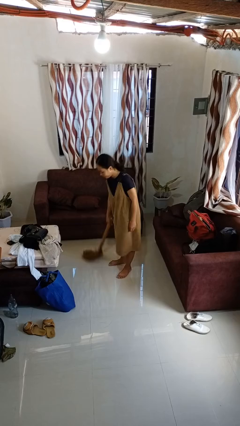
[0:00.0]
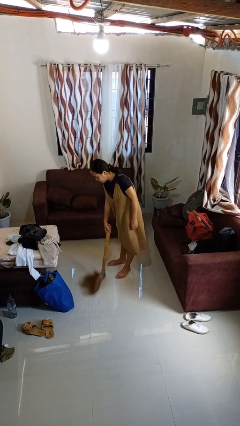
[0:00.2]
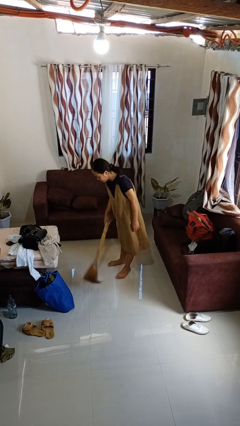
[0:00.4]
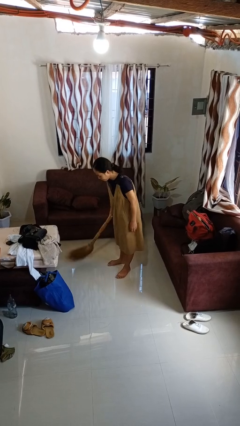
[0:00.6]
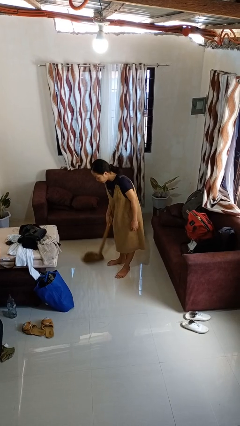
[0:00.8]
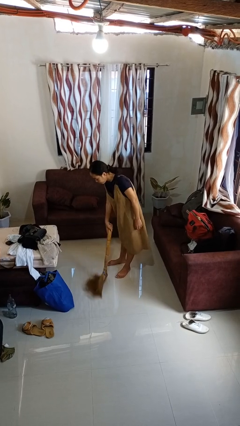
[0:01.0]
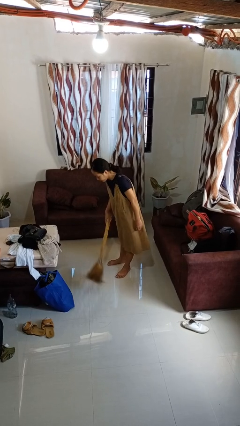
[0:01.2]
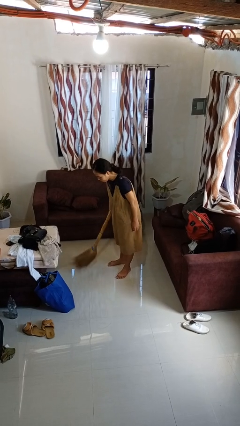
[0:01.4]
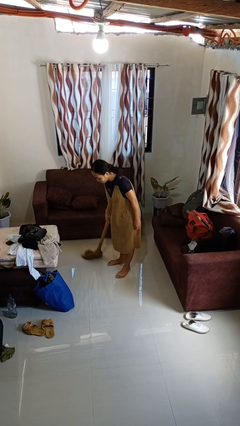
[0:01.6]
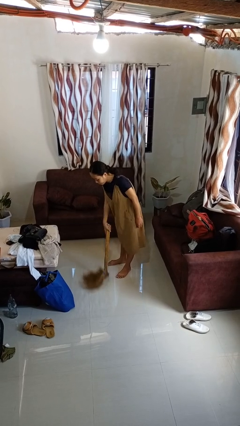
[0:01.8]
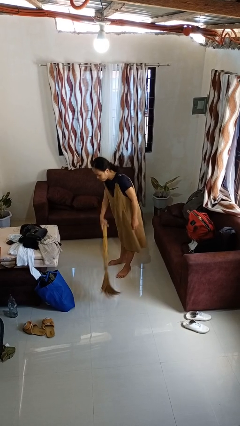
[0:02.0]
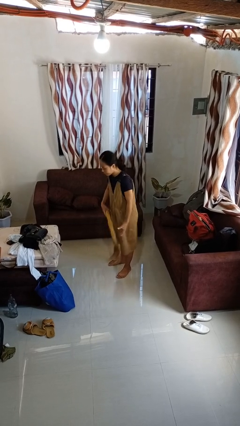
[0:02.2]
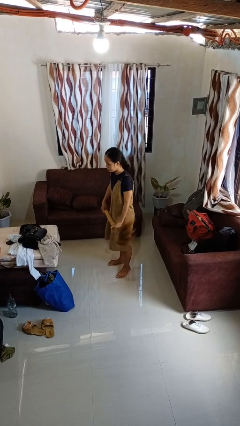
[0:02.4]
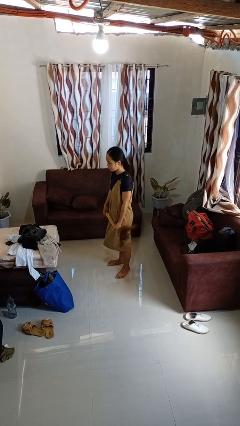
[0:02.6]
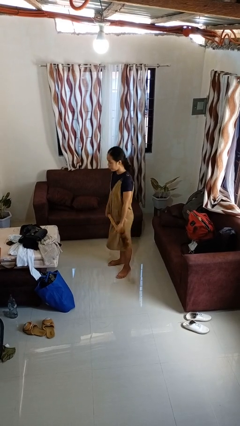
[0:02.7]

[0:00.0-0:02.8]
person sweeps floor

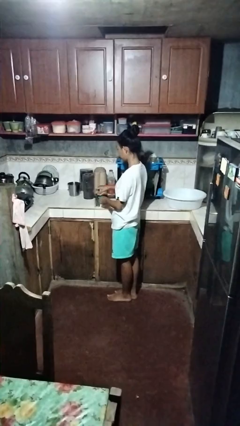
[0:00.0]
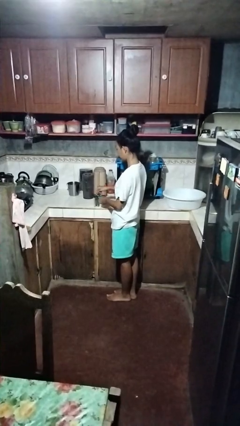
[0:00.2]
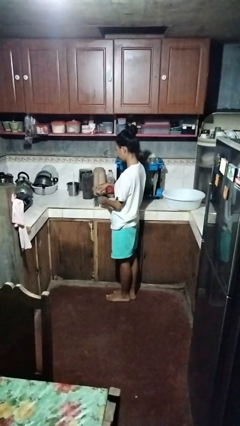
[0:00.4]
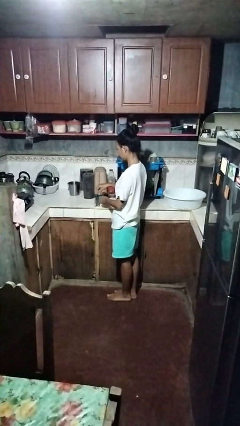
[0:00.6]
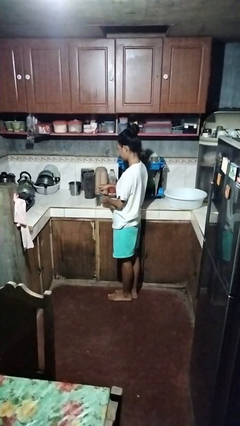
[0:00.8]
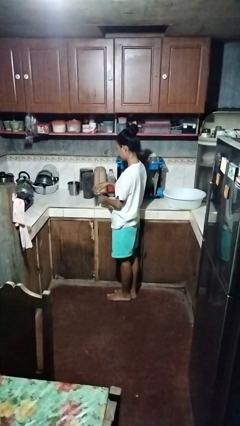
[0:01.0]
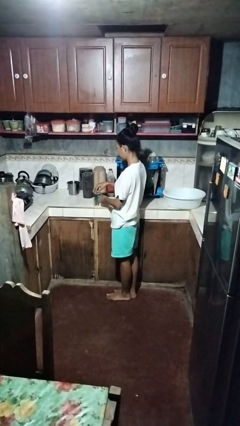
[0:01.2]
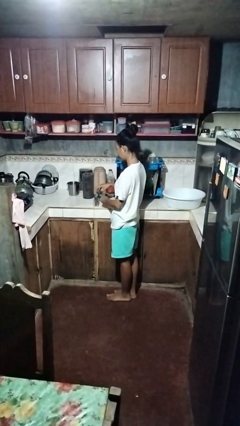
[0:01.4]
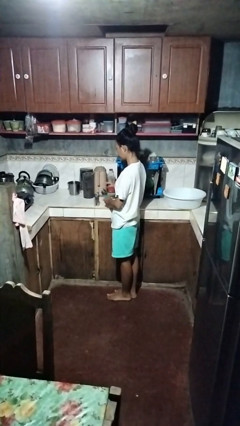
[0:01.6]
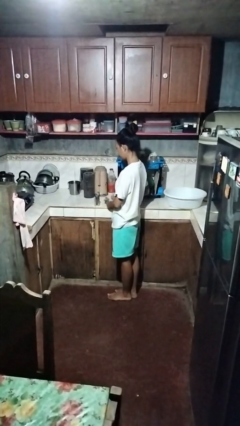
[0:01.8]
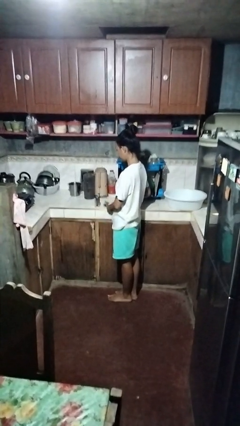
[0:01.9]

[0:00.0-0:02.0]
person opens can with can opener

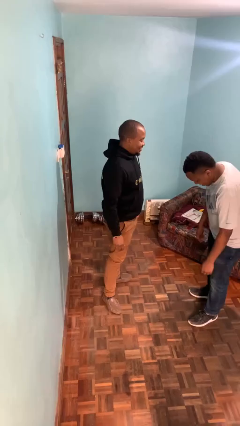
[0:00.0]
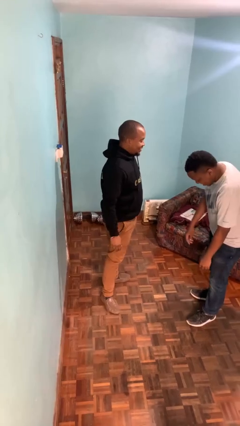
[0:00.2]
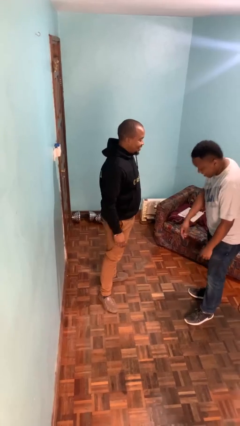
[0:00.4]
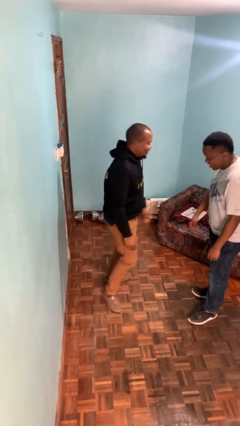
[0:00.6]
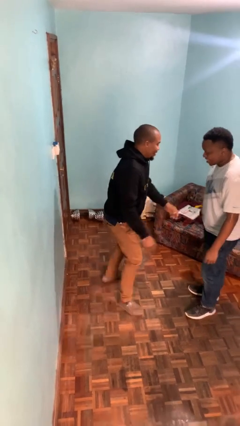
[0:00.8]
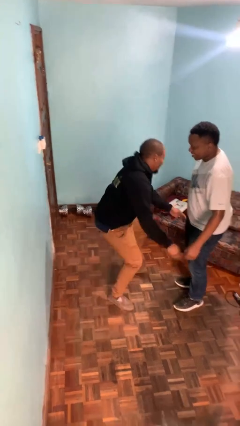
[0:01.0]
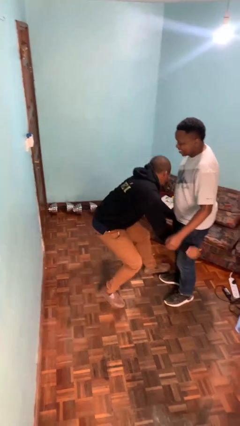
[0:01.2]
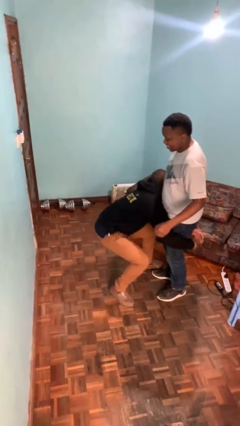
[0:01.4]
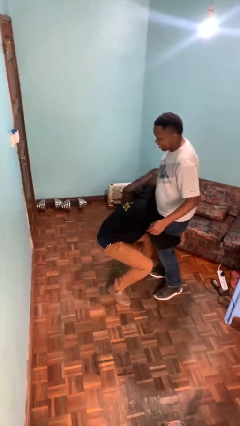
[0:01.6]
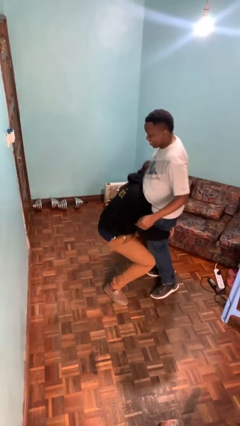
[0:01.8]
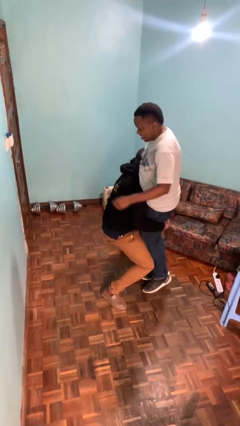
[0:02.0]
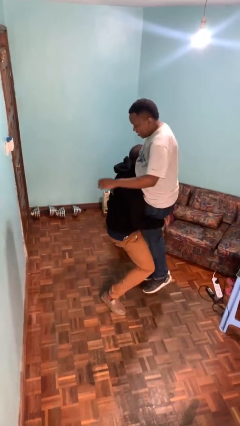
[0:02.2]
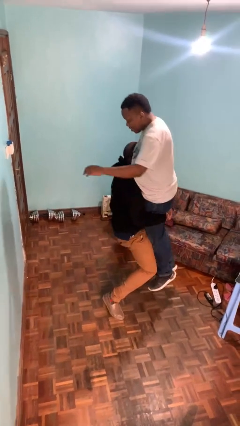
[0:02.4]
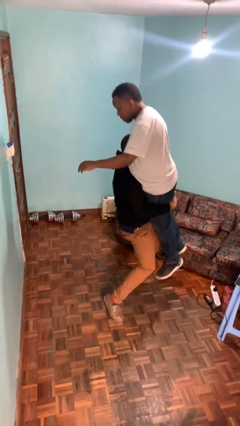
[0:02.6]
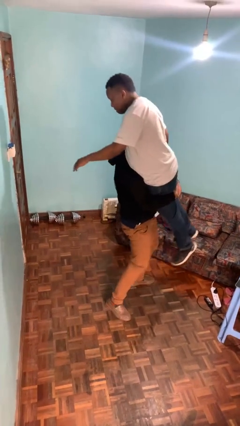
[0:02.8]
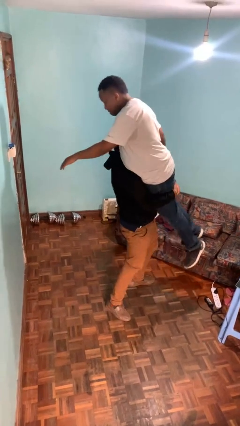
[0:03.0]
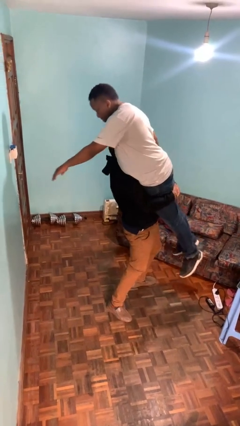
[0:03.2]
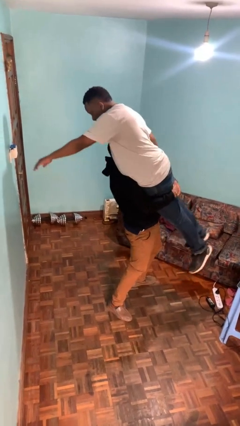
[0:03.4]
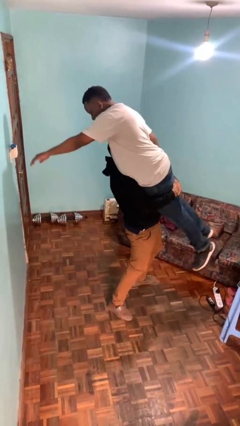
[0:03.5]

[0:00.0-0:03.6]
person carries person over shoulder

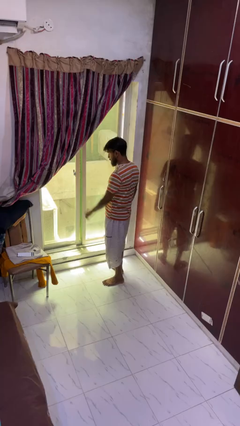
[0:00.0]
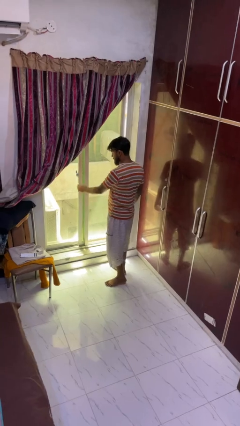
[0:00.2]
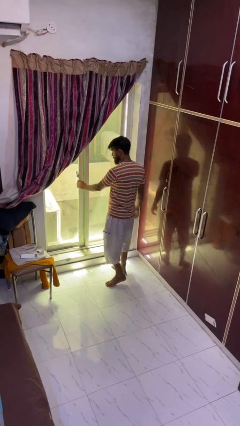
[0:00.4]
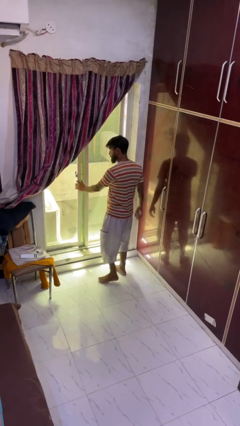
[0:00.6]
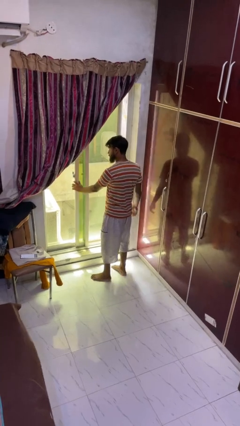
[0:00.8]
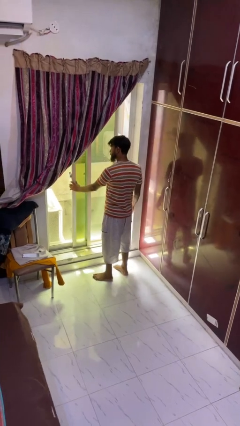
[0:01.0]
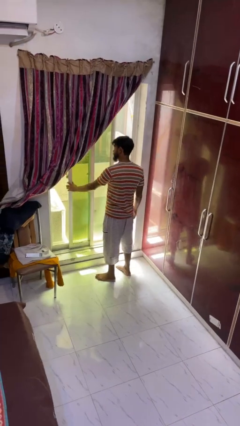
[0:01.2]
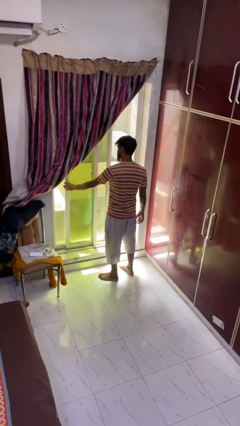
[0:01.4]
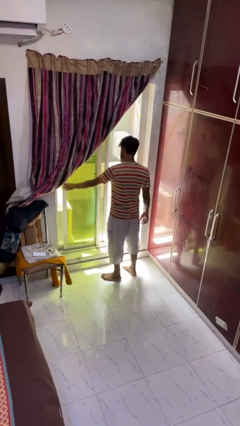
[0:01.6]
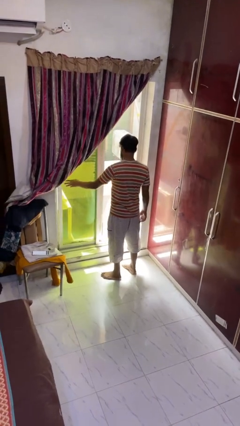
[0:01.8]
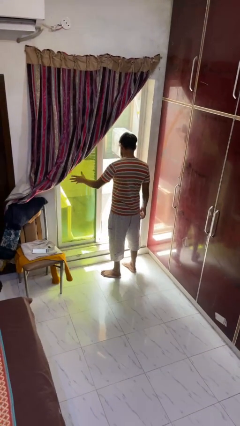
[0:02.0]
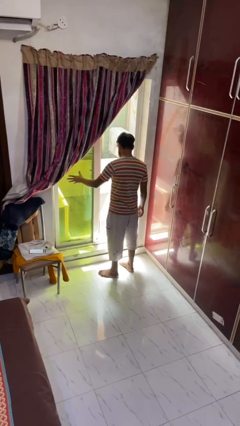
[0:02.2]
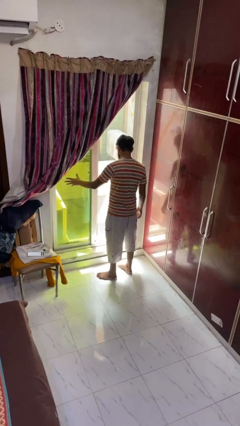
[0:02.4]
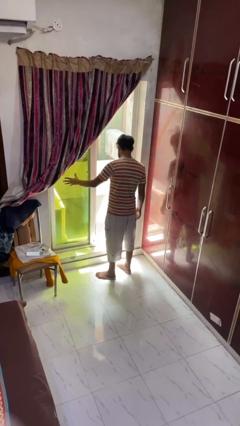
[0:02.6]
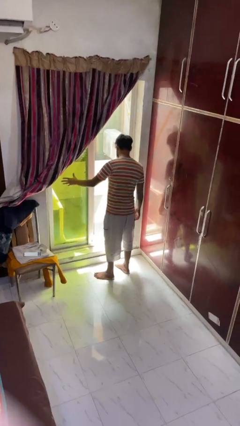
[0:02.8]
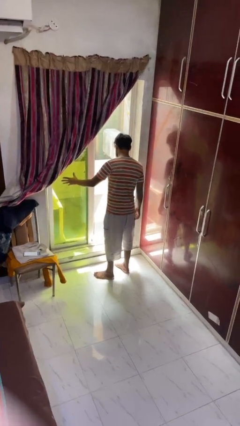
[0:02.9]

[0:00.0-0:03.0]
person opens home window

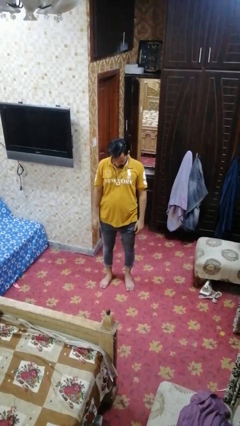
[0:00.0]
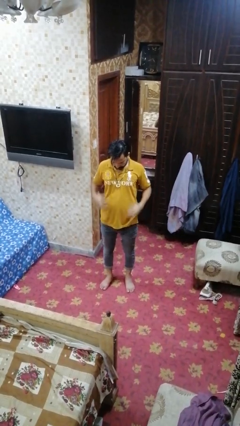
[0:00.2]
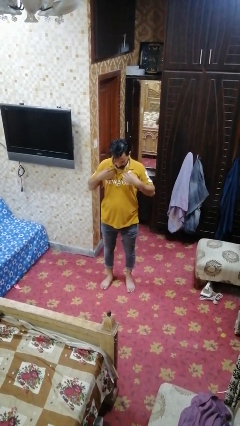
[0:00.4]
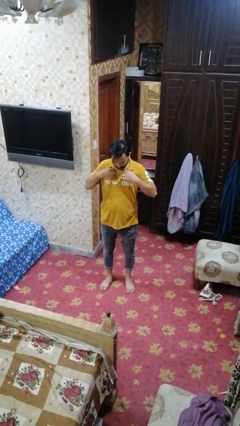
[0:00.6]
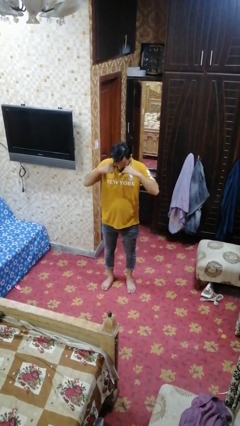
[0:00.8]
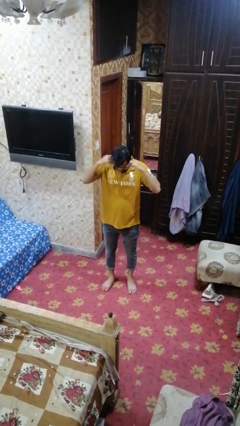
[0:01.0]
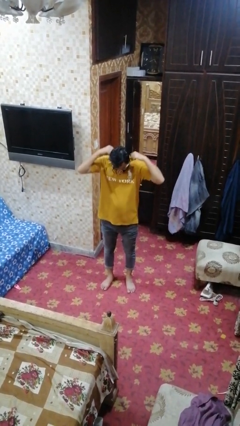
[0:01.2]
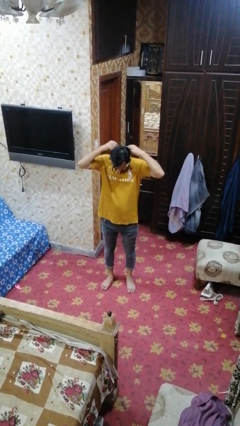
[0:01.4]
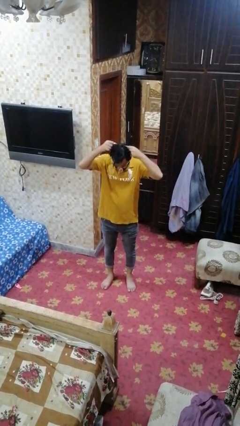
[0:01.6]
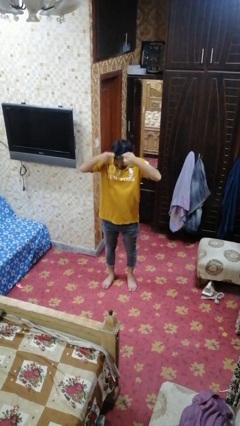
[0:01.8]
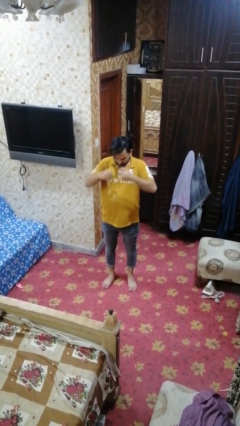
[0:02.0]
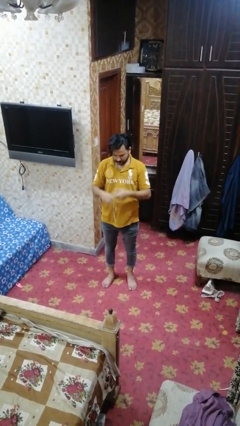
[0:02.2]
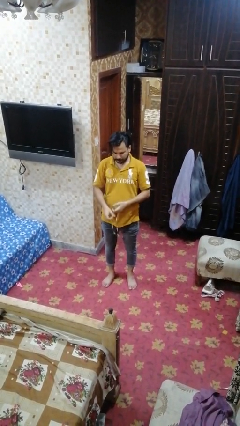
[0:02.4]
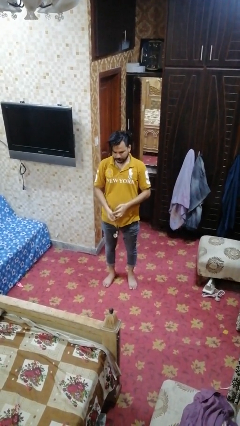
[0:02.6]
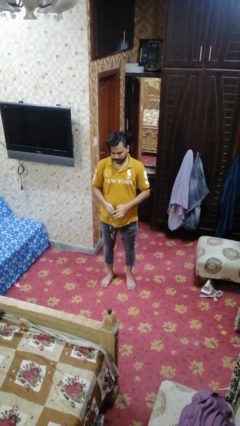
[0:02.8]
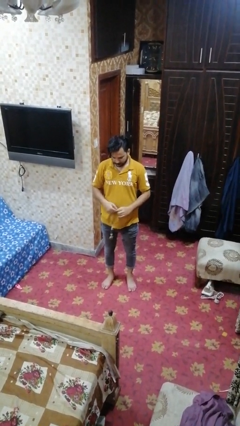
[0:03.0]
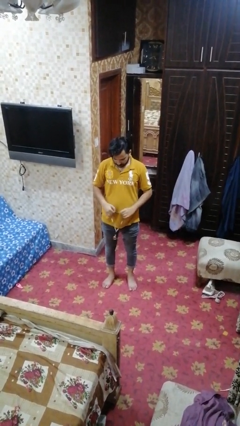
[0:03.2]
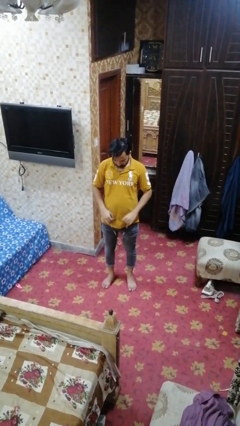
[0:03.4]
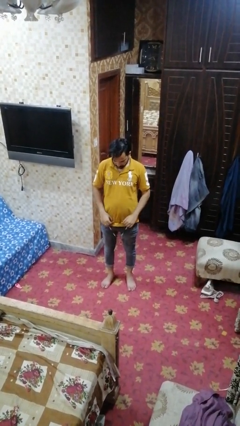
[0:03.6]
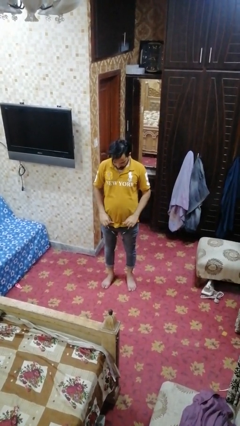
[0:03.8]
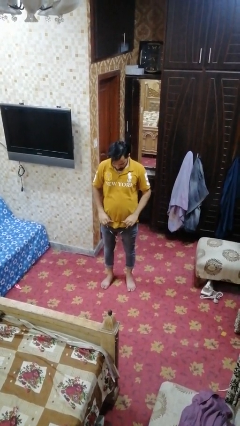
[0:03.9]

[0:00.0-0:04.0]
person takes off necklace

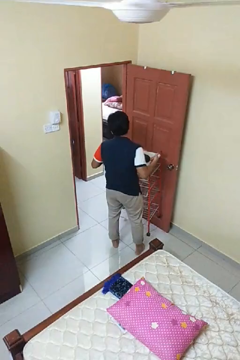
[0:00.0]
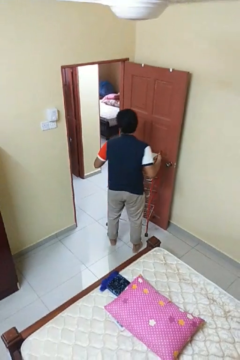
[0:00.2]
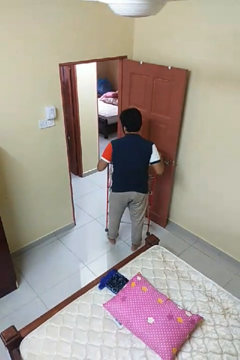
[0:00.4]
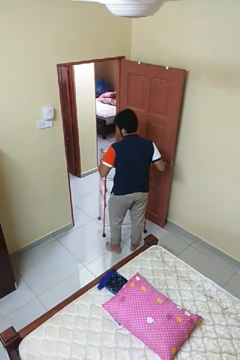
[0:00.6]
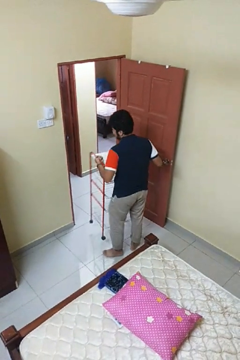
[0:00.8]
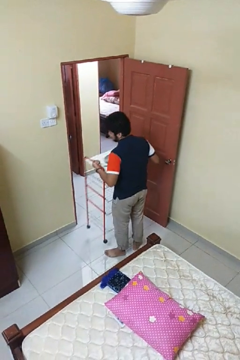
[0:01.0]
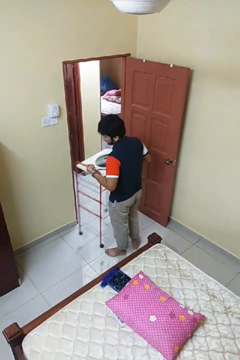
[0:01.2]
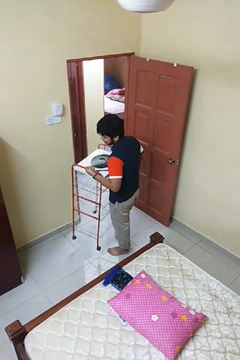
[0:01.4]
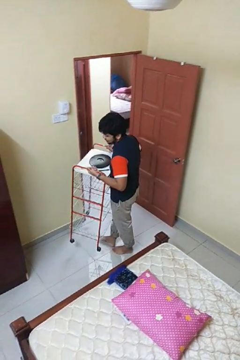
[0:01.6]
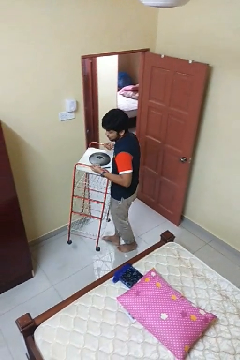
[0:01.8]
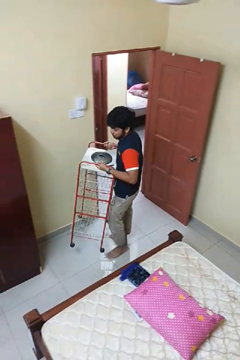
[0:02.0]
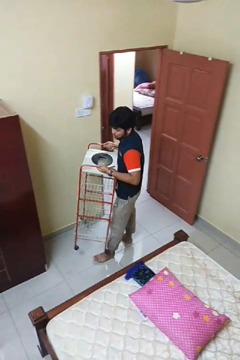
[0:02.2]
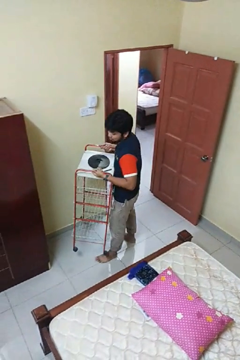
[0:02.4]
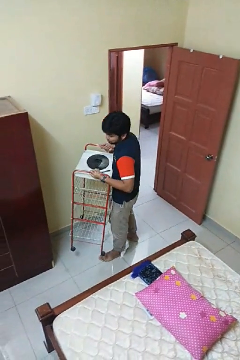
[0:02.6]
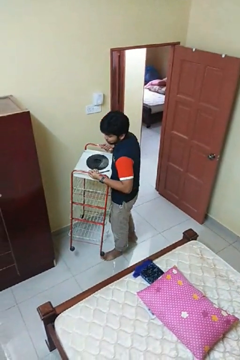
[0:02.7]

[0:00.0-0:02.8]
person carries furniture
